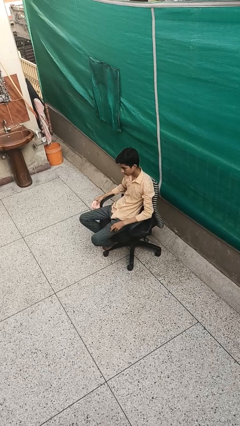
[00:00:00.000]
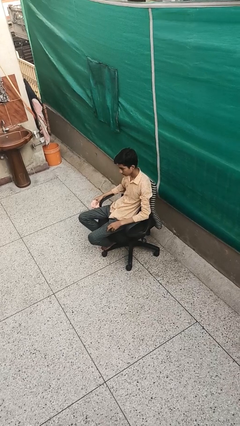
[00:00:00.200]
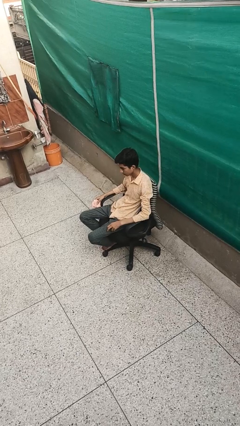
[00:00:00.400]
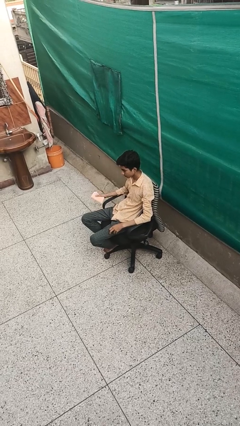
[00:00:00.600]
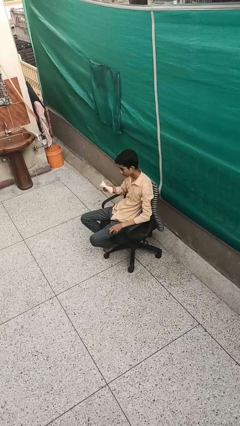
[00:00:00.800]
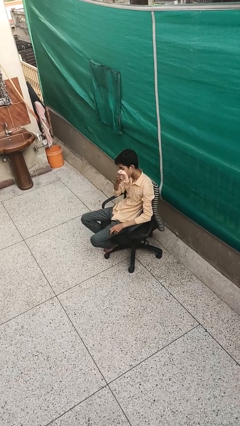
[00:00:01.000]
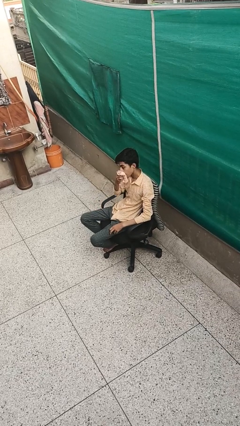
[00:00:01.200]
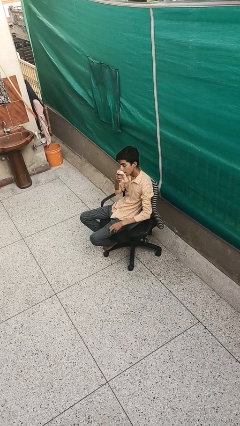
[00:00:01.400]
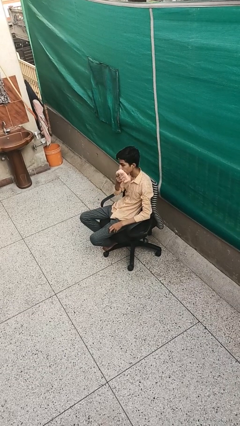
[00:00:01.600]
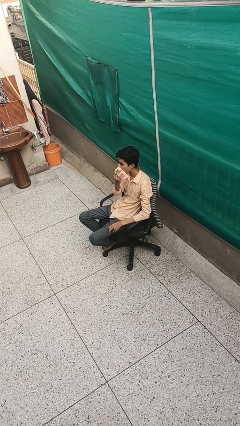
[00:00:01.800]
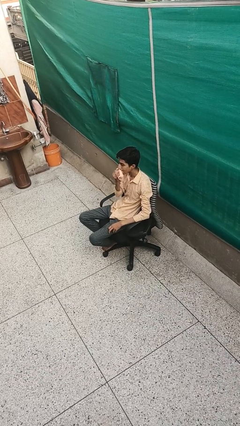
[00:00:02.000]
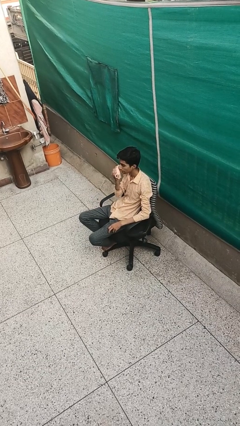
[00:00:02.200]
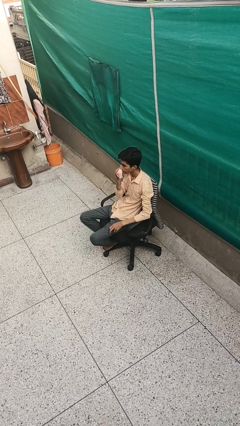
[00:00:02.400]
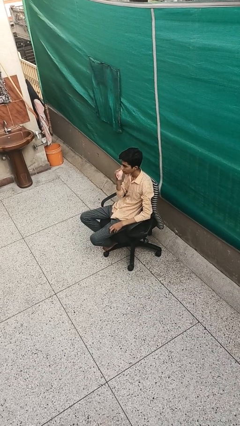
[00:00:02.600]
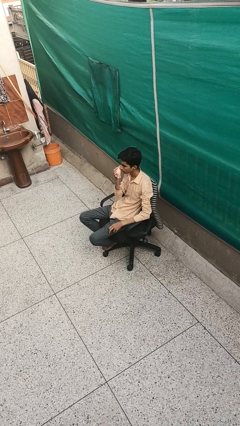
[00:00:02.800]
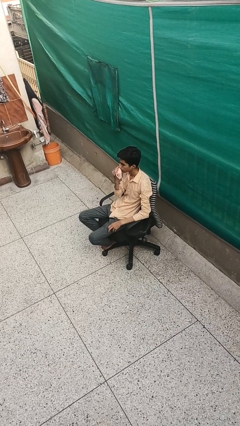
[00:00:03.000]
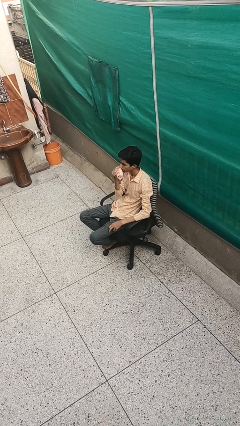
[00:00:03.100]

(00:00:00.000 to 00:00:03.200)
person wipes mouth with napkin

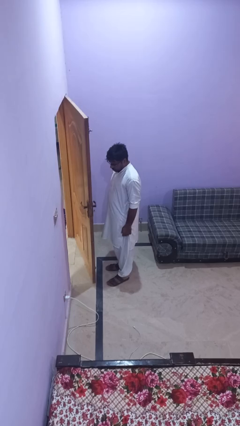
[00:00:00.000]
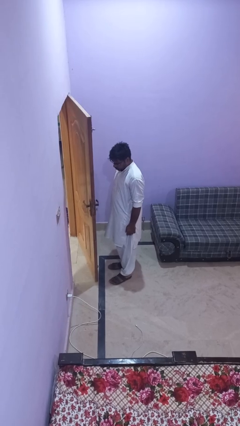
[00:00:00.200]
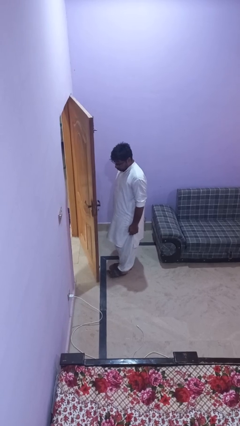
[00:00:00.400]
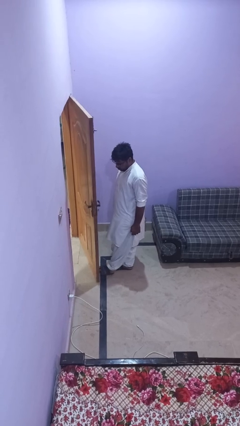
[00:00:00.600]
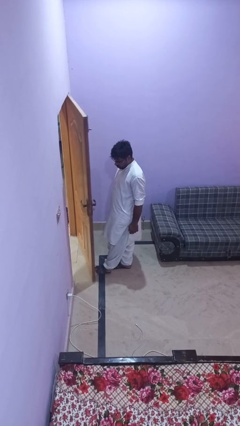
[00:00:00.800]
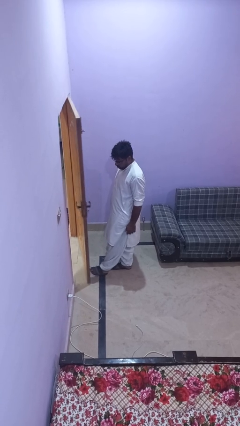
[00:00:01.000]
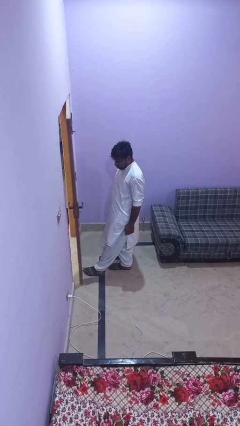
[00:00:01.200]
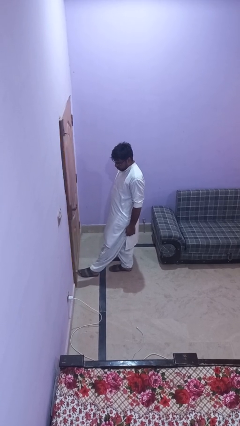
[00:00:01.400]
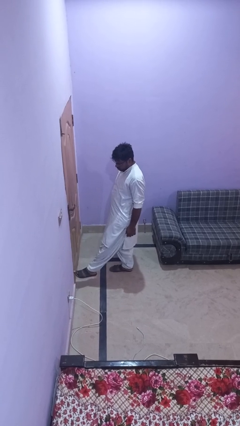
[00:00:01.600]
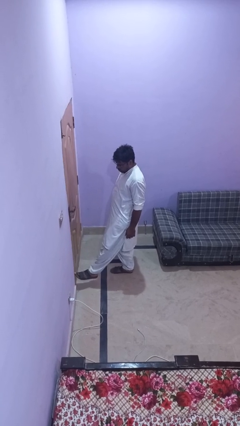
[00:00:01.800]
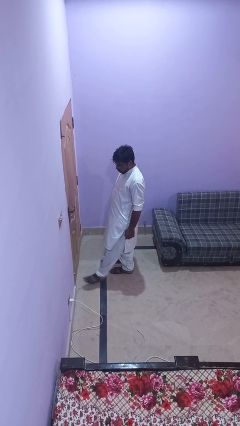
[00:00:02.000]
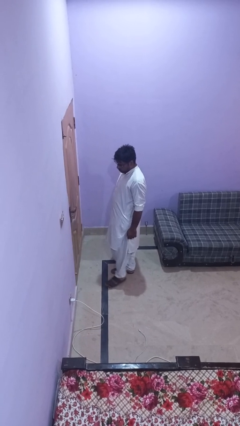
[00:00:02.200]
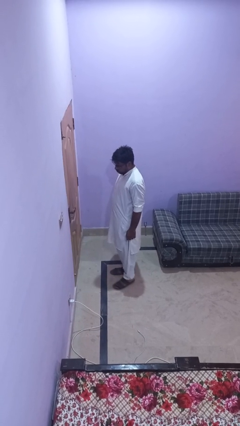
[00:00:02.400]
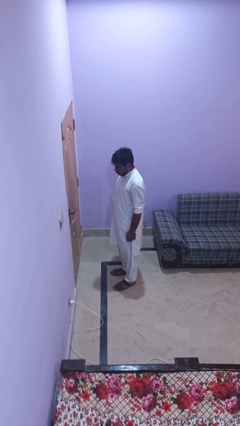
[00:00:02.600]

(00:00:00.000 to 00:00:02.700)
person closes door with foot

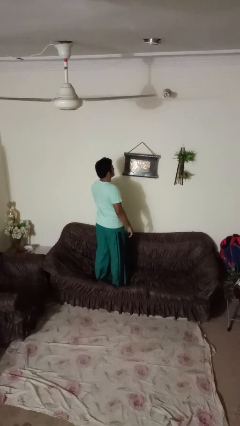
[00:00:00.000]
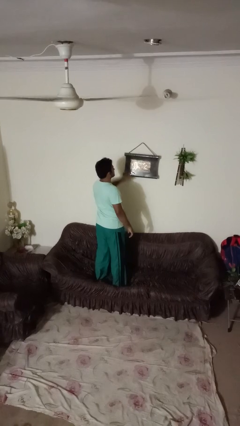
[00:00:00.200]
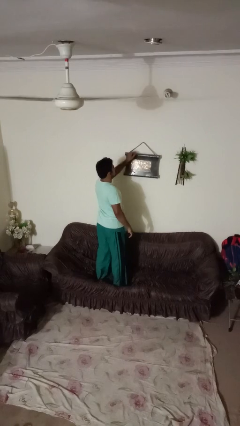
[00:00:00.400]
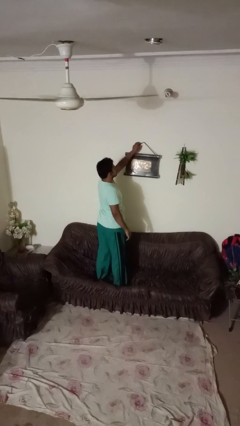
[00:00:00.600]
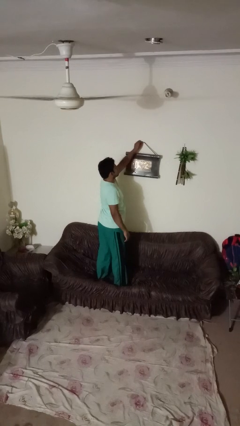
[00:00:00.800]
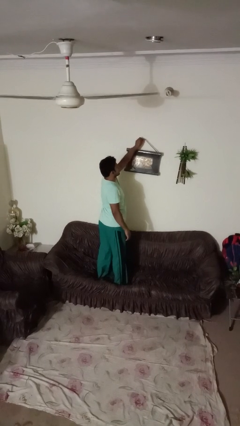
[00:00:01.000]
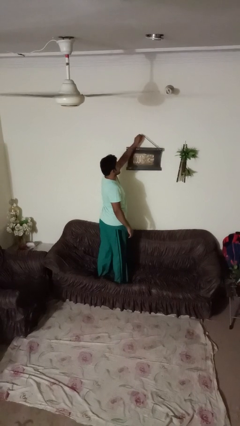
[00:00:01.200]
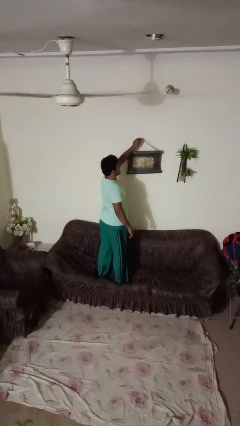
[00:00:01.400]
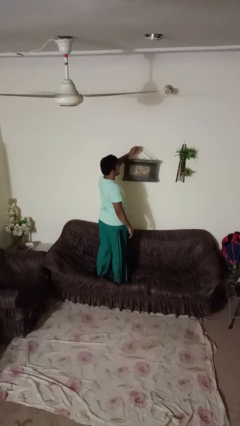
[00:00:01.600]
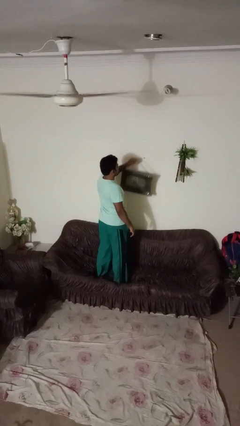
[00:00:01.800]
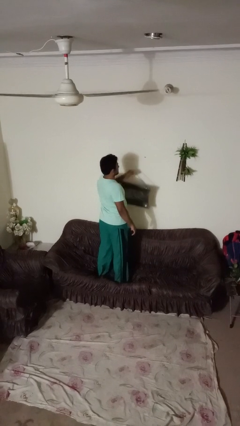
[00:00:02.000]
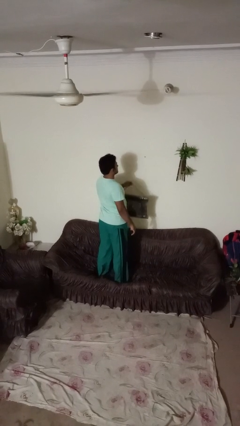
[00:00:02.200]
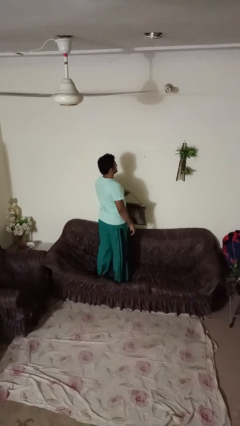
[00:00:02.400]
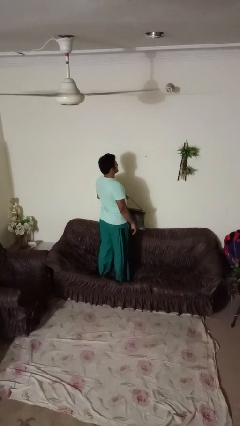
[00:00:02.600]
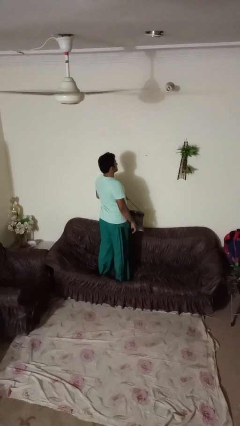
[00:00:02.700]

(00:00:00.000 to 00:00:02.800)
person takes down picture frame

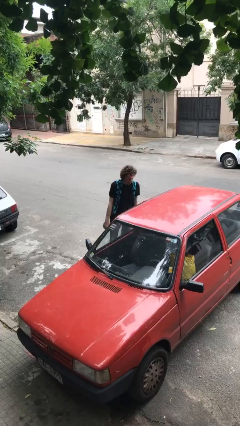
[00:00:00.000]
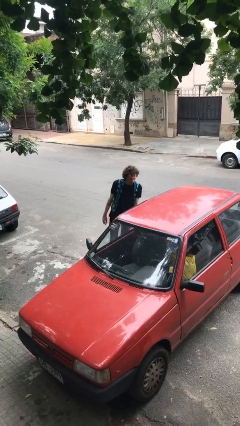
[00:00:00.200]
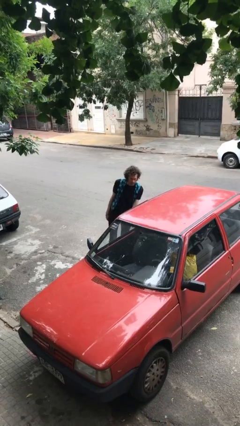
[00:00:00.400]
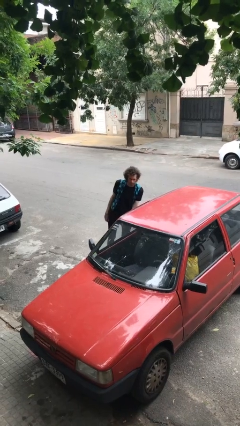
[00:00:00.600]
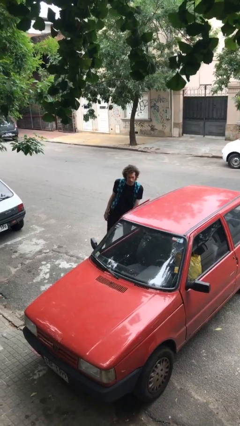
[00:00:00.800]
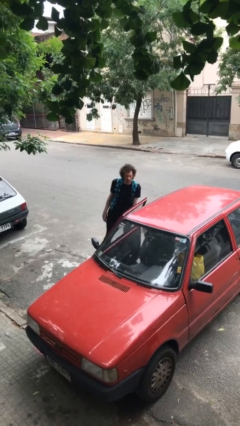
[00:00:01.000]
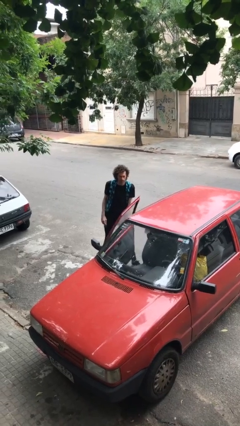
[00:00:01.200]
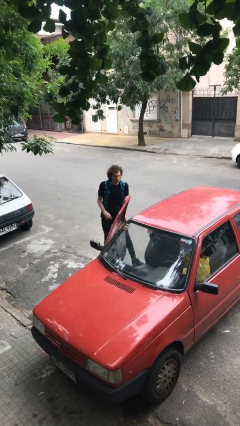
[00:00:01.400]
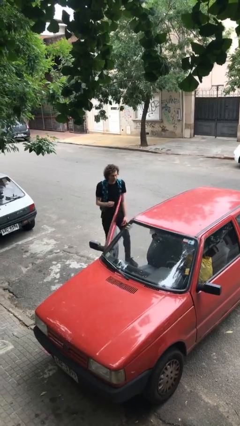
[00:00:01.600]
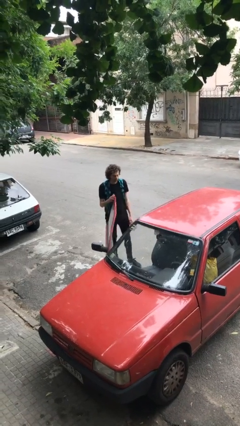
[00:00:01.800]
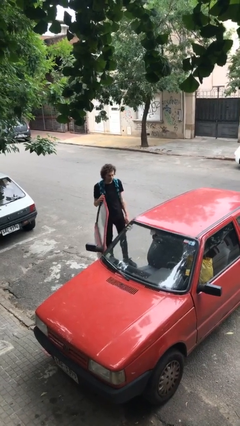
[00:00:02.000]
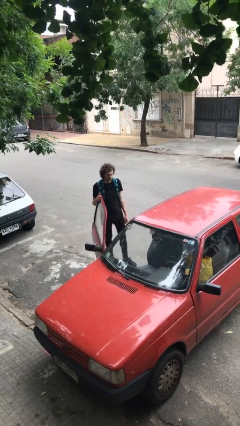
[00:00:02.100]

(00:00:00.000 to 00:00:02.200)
person opens car trunk

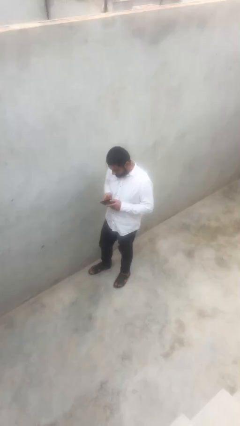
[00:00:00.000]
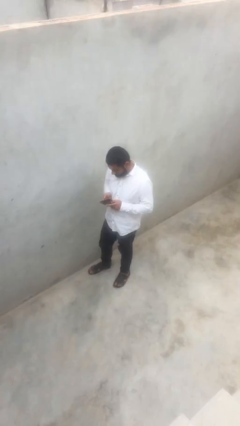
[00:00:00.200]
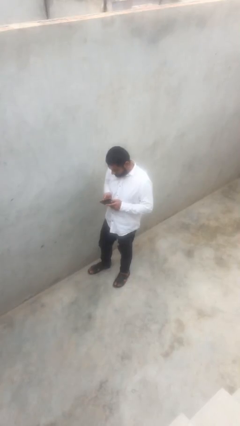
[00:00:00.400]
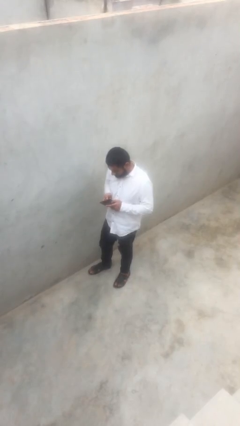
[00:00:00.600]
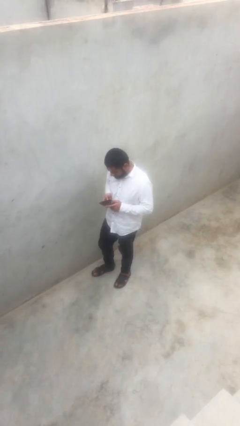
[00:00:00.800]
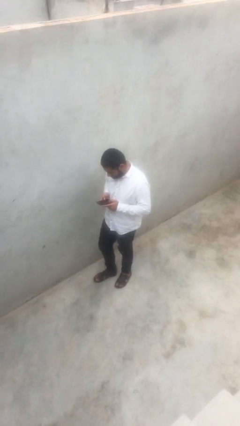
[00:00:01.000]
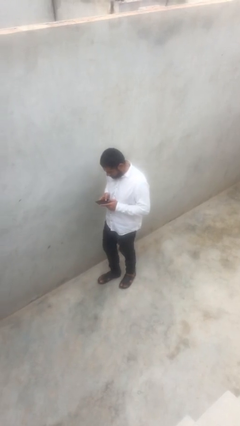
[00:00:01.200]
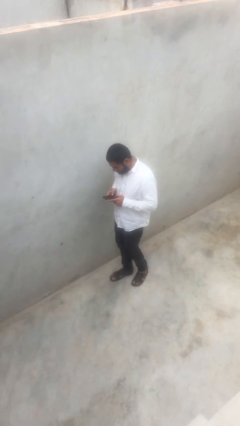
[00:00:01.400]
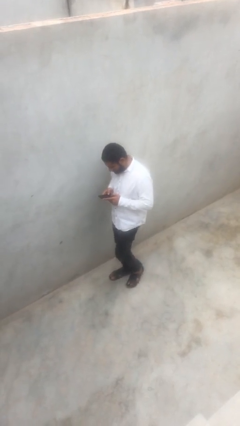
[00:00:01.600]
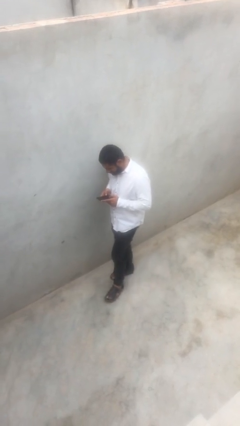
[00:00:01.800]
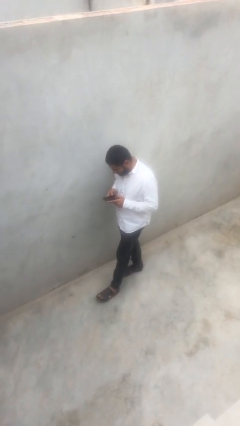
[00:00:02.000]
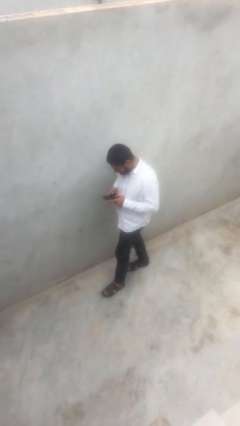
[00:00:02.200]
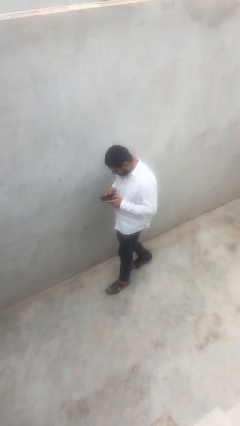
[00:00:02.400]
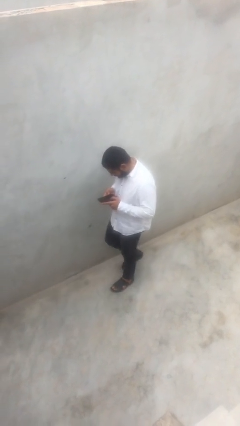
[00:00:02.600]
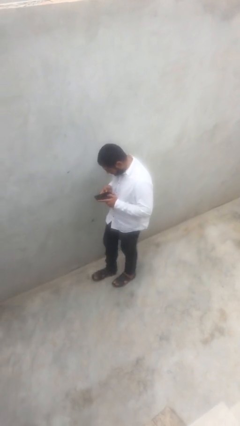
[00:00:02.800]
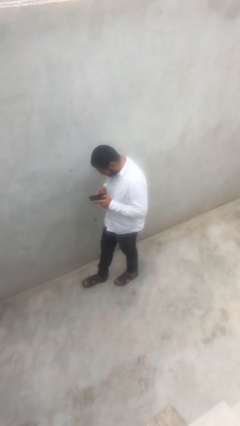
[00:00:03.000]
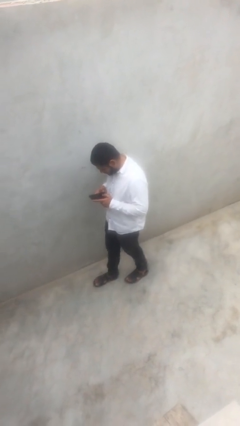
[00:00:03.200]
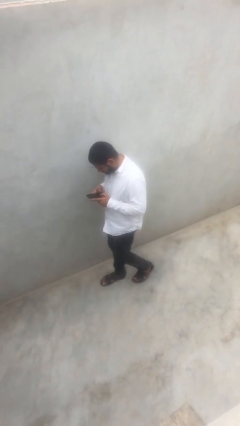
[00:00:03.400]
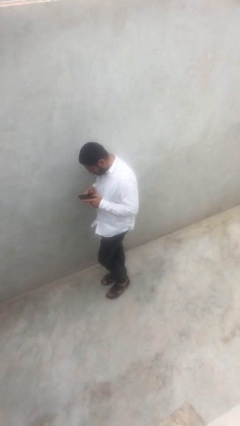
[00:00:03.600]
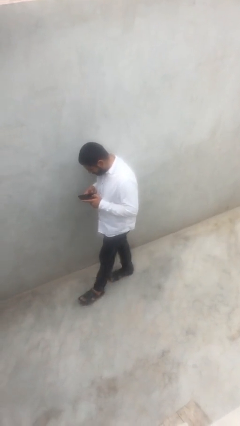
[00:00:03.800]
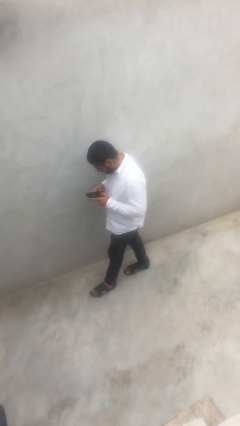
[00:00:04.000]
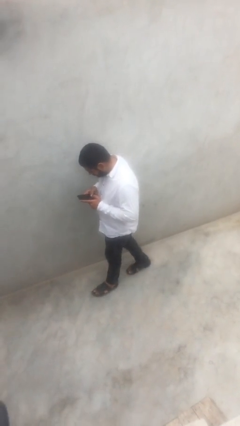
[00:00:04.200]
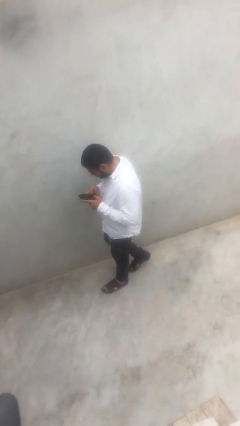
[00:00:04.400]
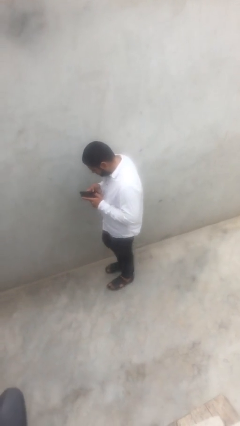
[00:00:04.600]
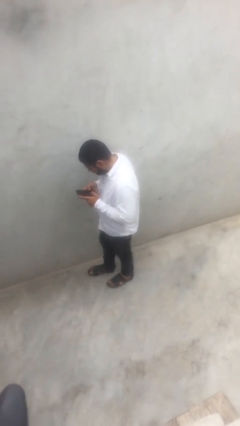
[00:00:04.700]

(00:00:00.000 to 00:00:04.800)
person texts on phone

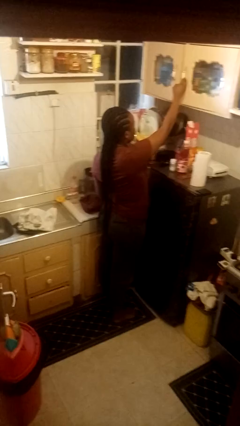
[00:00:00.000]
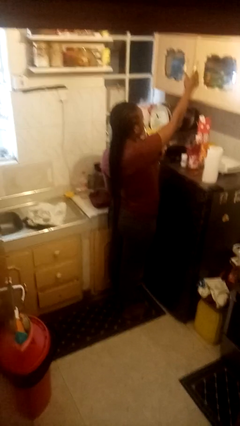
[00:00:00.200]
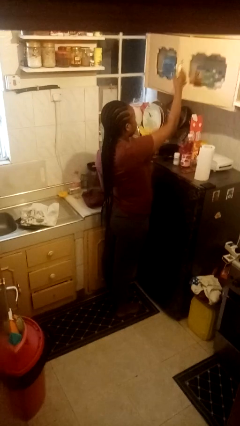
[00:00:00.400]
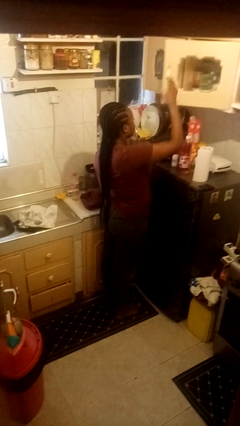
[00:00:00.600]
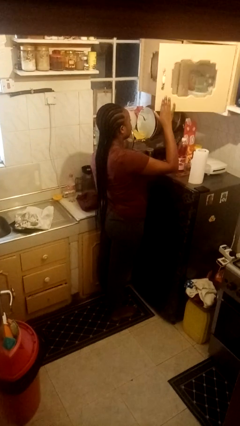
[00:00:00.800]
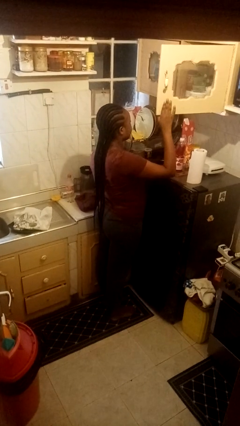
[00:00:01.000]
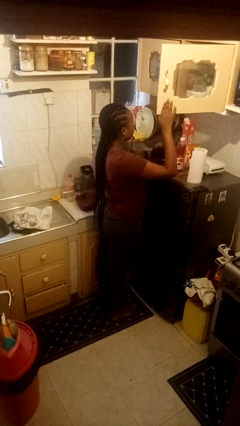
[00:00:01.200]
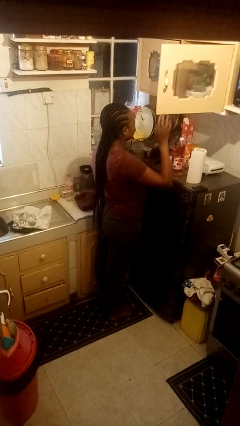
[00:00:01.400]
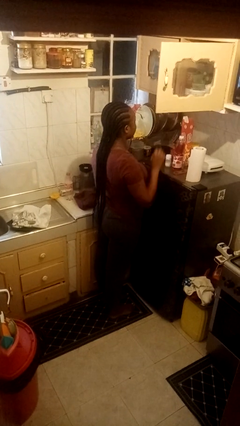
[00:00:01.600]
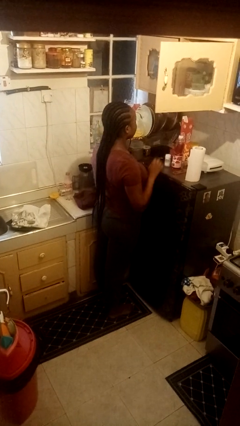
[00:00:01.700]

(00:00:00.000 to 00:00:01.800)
person opens cabinet
